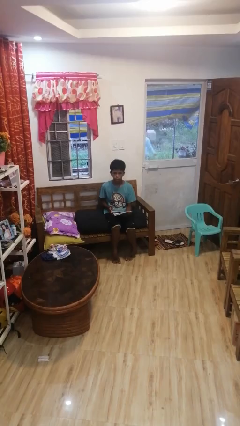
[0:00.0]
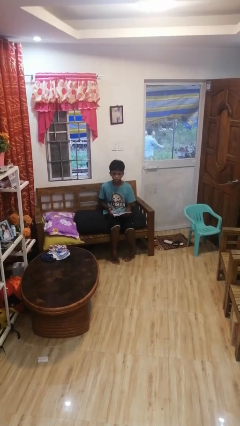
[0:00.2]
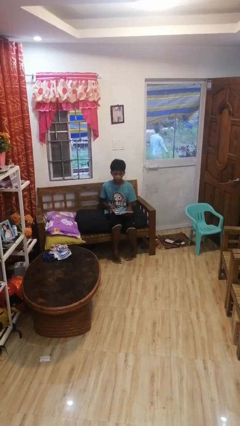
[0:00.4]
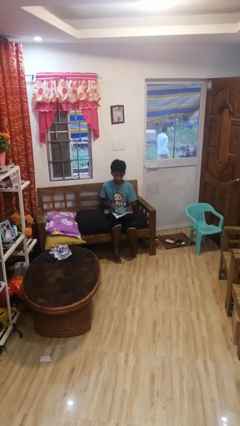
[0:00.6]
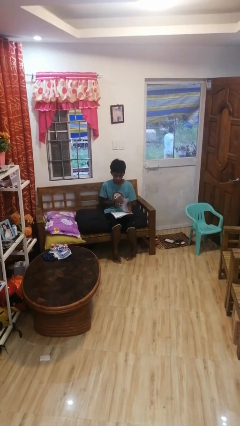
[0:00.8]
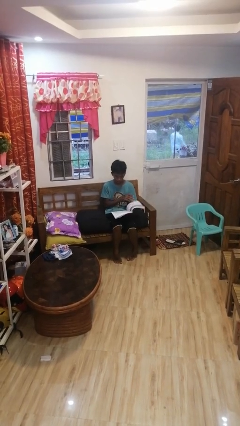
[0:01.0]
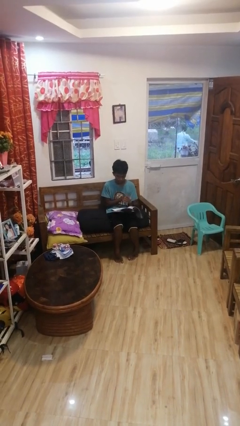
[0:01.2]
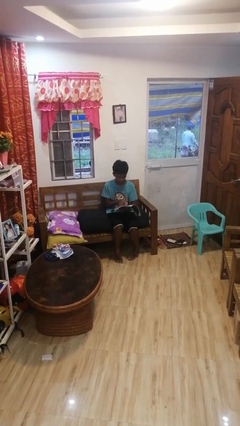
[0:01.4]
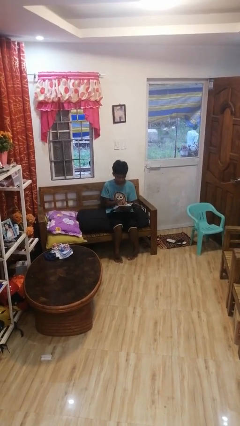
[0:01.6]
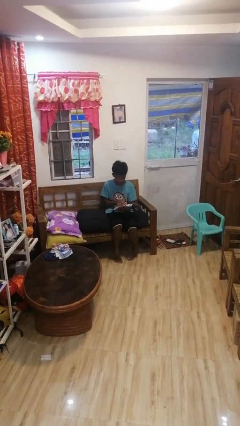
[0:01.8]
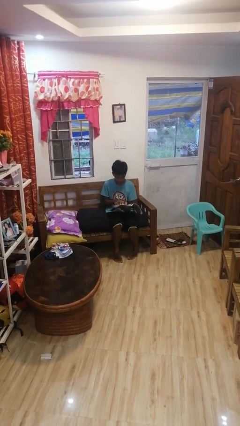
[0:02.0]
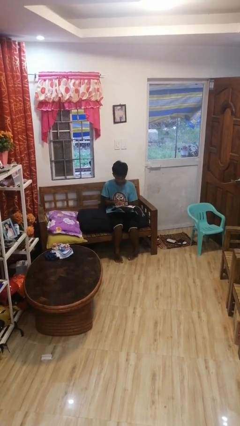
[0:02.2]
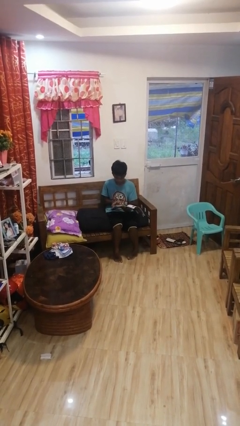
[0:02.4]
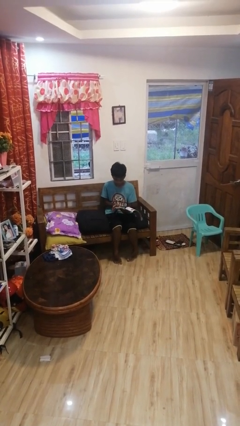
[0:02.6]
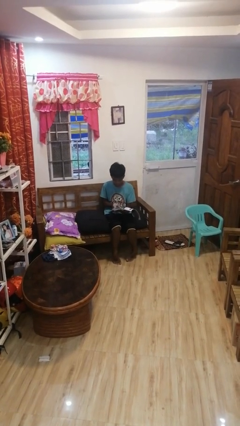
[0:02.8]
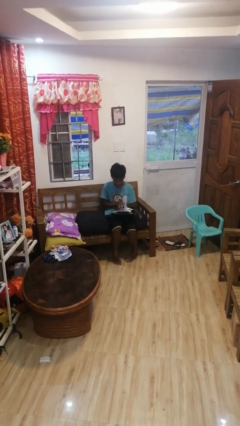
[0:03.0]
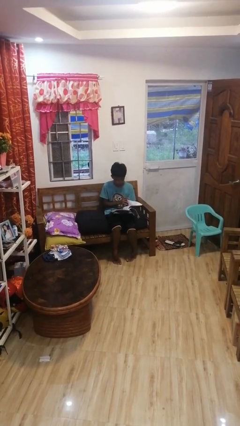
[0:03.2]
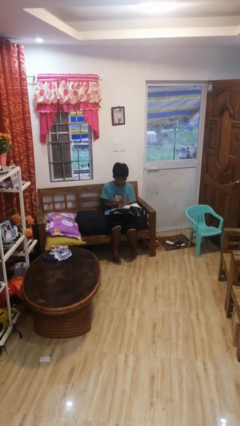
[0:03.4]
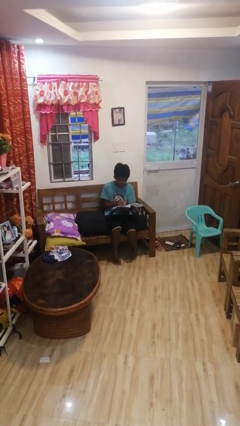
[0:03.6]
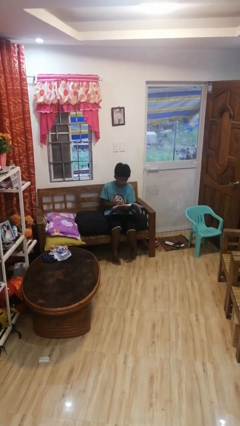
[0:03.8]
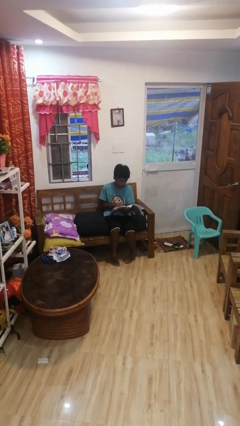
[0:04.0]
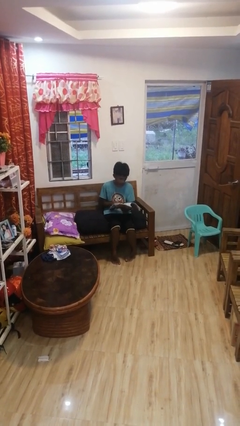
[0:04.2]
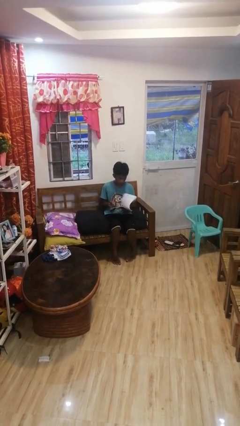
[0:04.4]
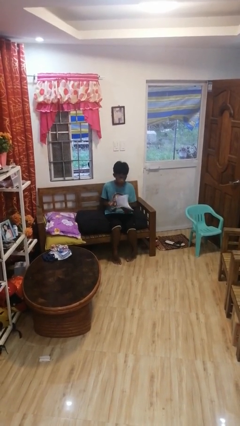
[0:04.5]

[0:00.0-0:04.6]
person reads magazine

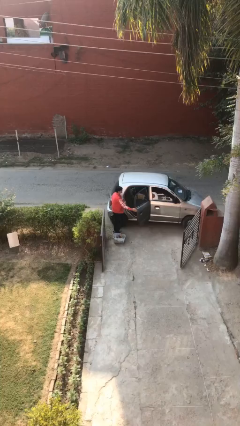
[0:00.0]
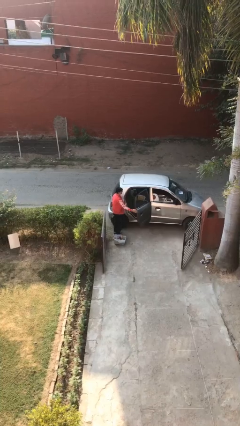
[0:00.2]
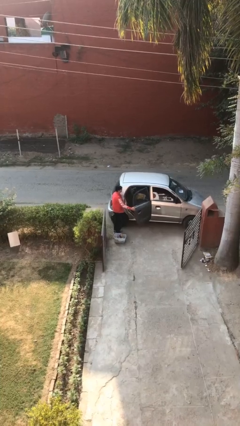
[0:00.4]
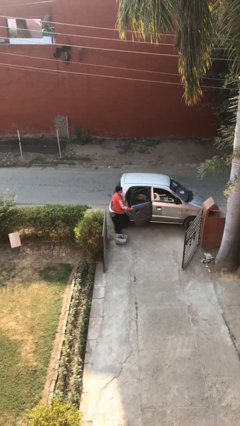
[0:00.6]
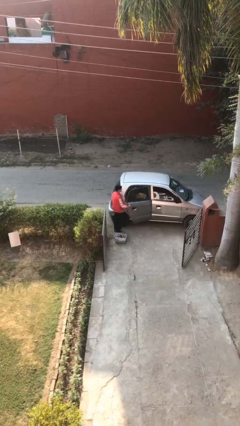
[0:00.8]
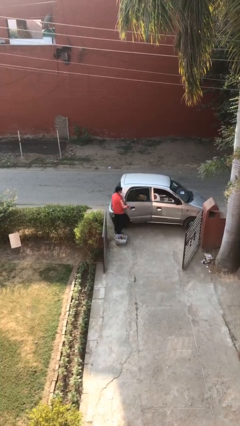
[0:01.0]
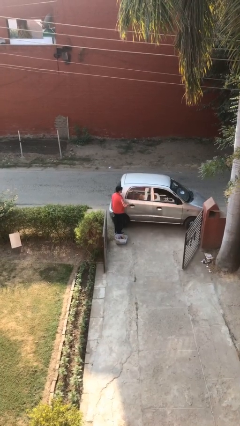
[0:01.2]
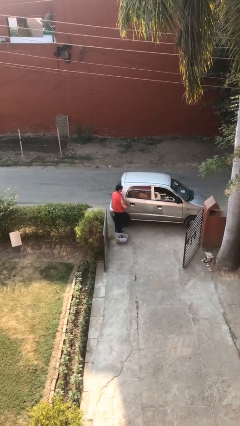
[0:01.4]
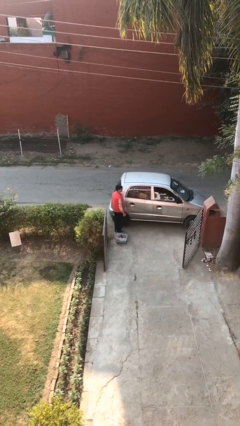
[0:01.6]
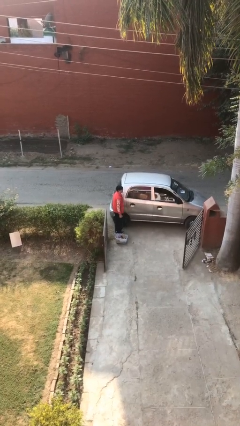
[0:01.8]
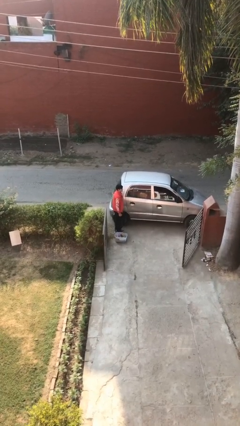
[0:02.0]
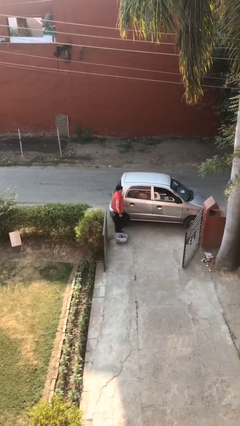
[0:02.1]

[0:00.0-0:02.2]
person closes car door

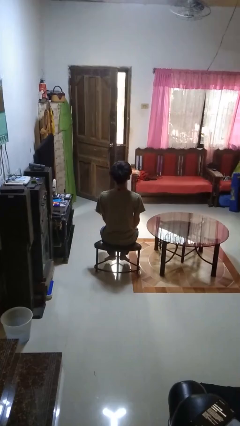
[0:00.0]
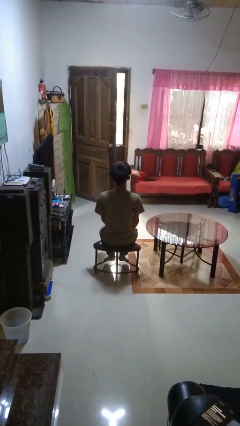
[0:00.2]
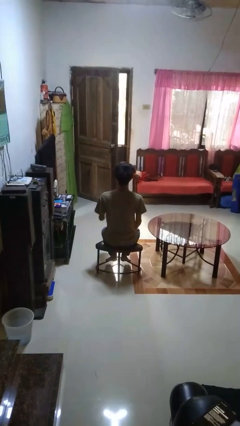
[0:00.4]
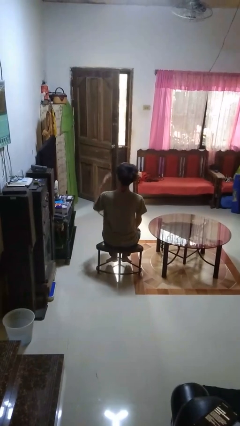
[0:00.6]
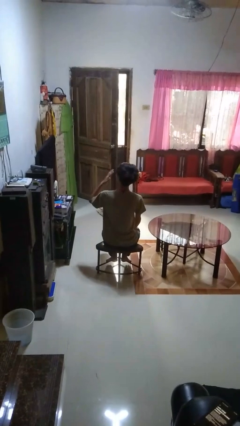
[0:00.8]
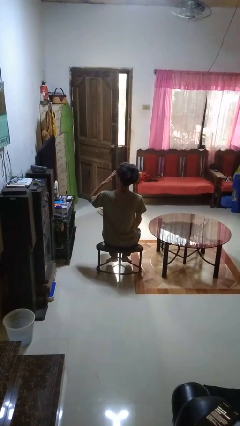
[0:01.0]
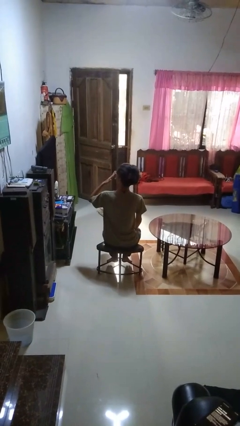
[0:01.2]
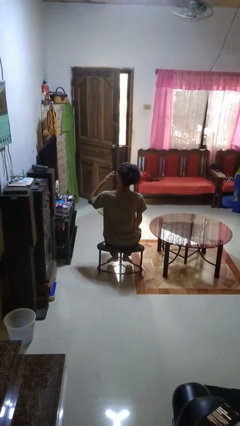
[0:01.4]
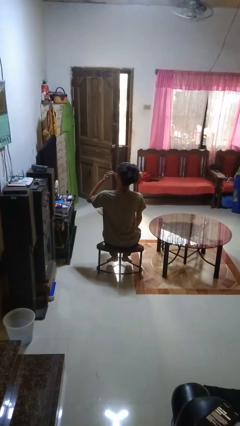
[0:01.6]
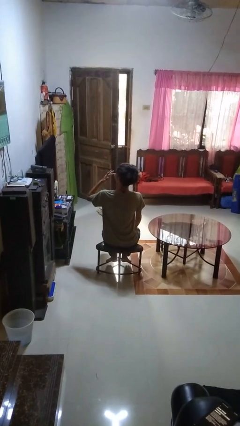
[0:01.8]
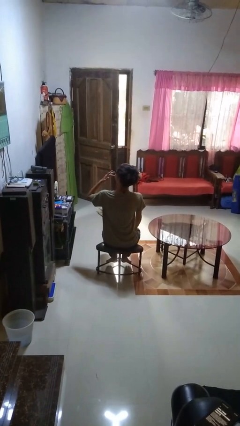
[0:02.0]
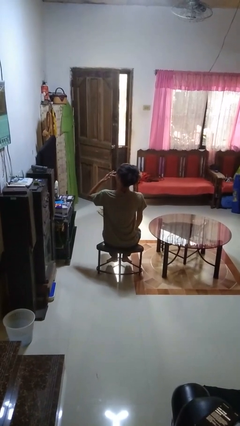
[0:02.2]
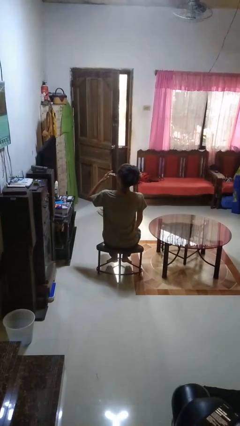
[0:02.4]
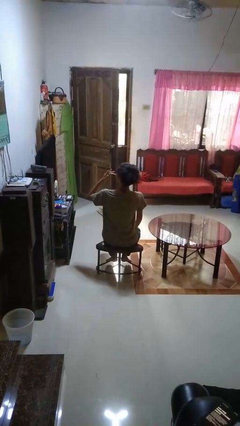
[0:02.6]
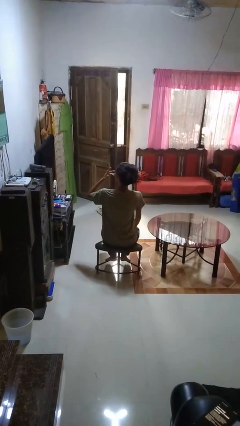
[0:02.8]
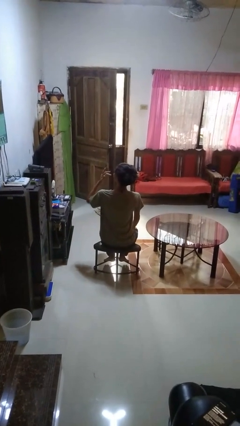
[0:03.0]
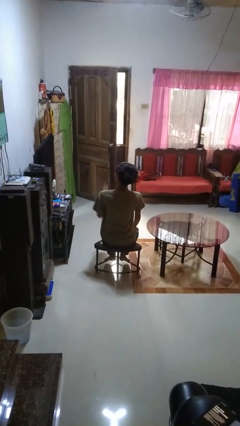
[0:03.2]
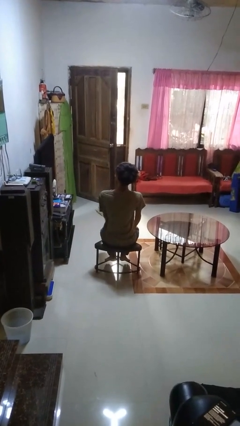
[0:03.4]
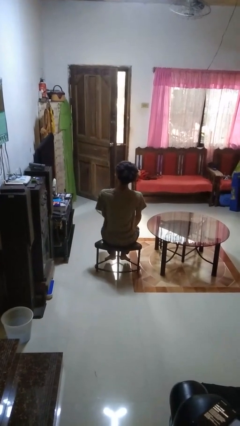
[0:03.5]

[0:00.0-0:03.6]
person licks fingers

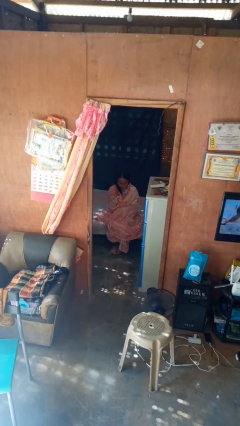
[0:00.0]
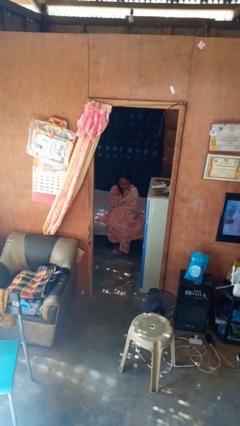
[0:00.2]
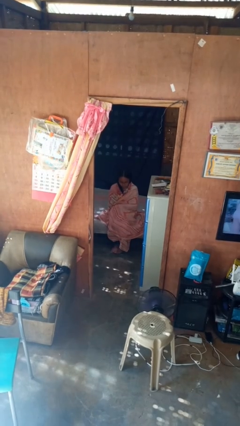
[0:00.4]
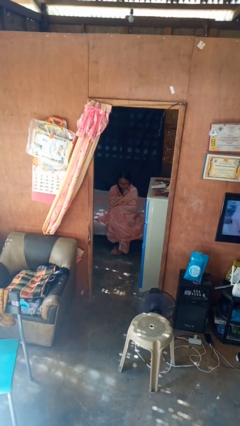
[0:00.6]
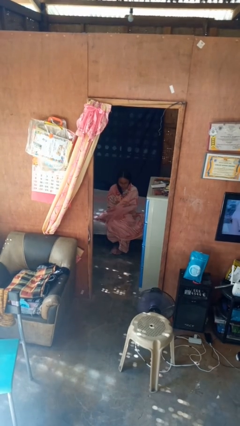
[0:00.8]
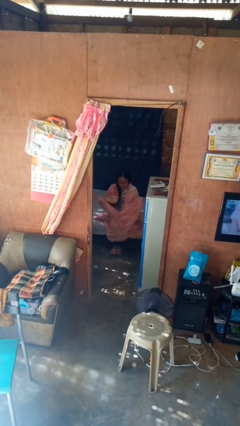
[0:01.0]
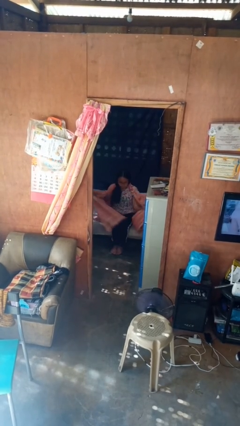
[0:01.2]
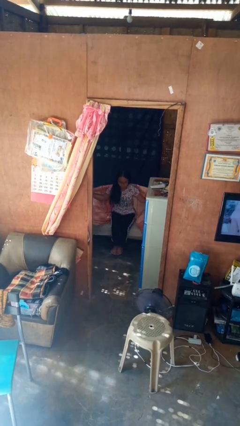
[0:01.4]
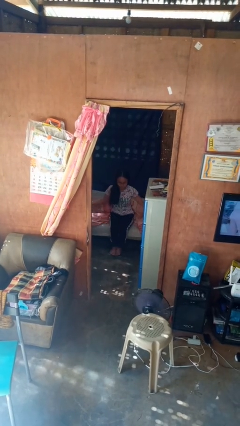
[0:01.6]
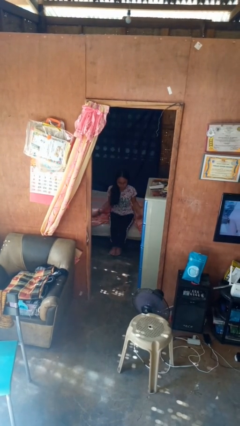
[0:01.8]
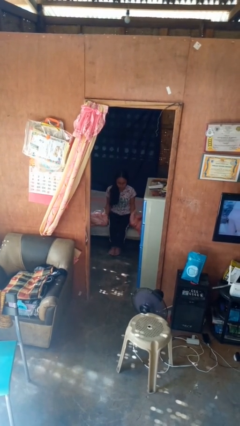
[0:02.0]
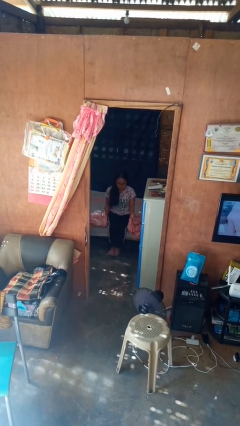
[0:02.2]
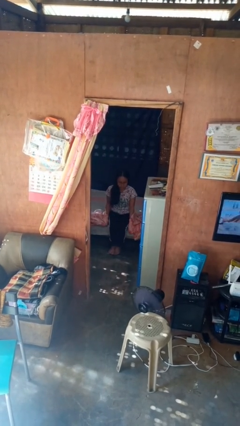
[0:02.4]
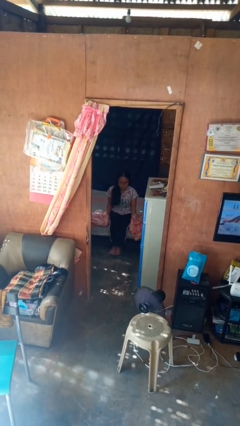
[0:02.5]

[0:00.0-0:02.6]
person uncovers with blanket

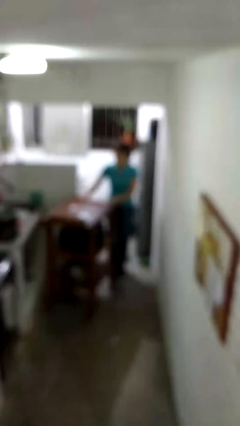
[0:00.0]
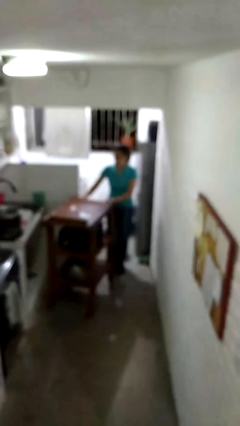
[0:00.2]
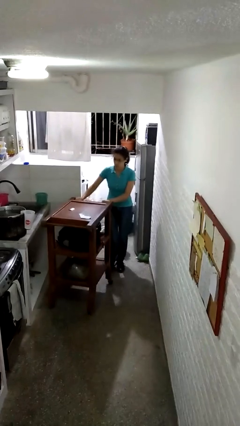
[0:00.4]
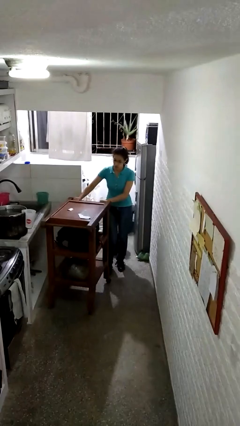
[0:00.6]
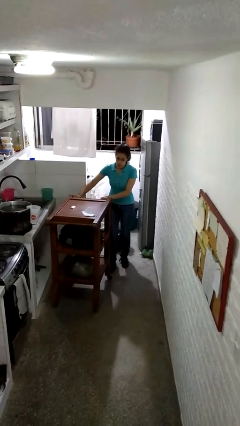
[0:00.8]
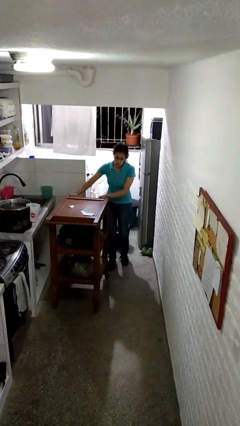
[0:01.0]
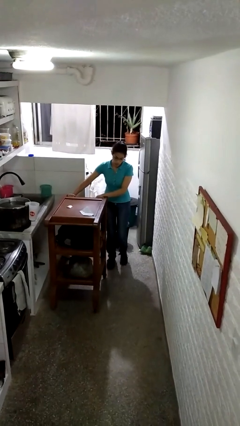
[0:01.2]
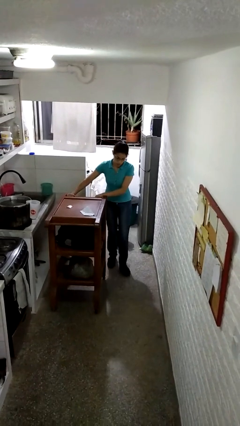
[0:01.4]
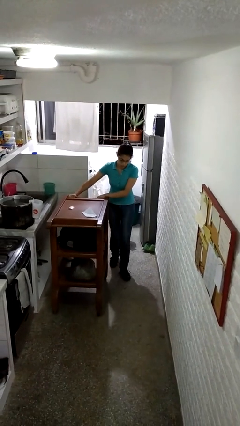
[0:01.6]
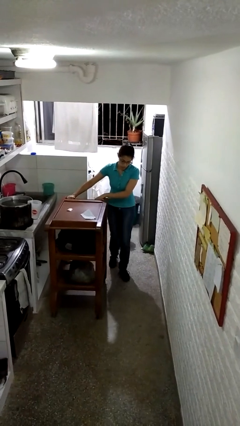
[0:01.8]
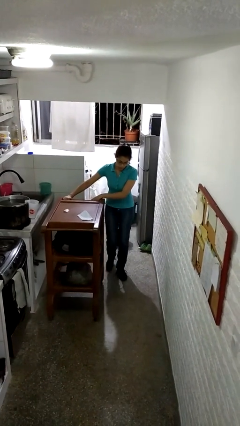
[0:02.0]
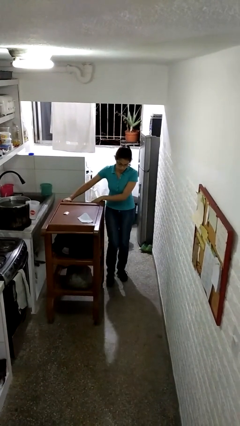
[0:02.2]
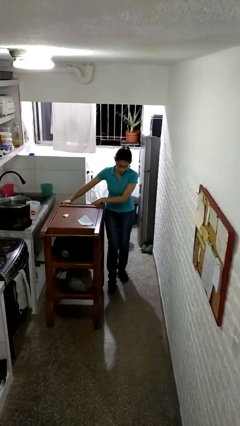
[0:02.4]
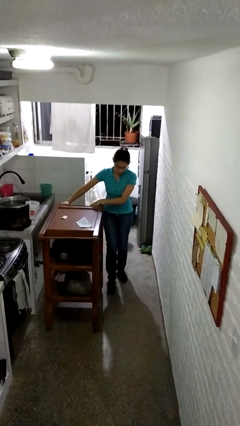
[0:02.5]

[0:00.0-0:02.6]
person pushes wheeled cart

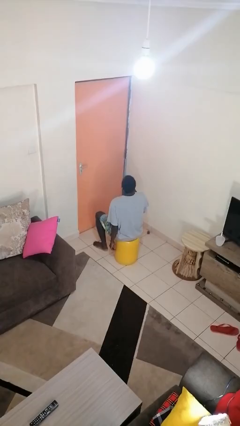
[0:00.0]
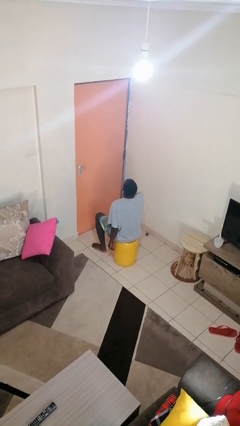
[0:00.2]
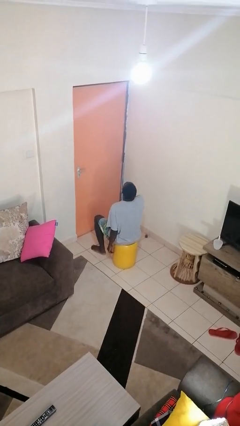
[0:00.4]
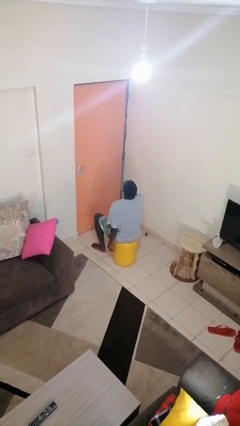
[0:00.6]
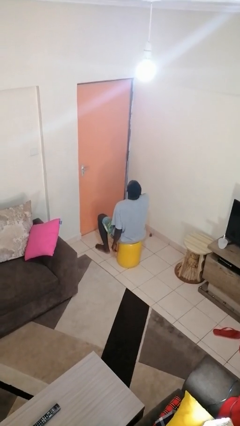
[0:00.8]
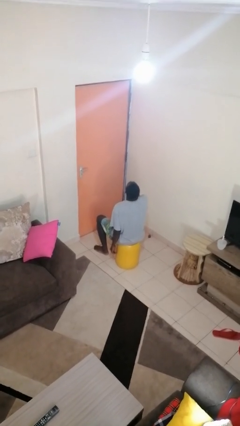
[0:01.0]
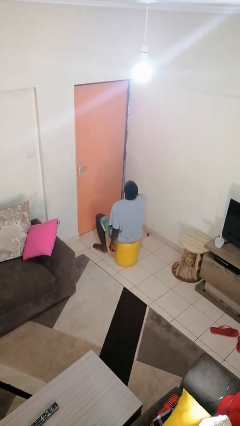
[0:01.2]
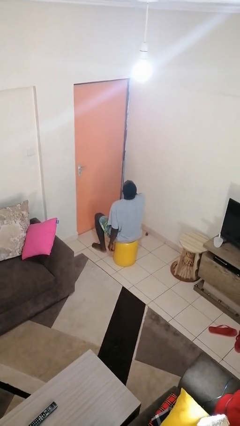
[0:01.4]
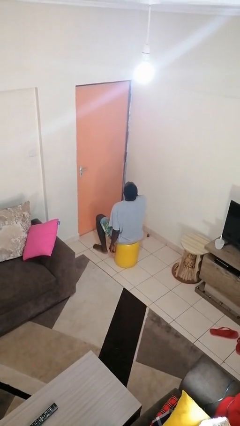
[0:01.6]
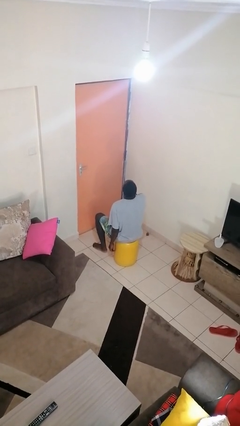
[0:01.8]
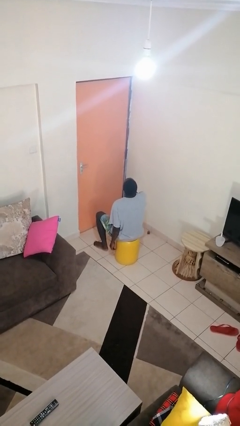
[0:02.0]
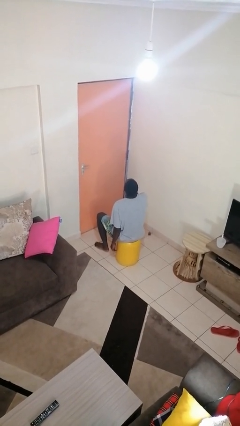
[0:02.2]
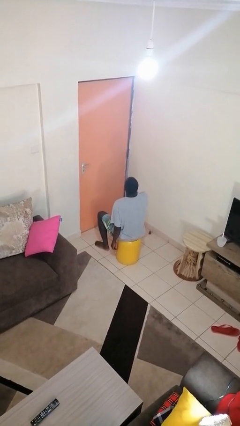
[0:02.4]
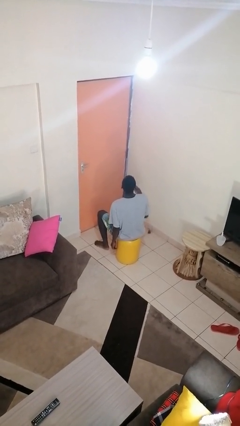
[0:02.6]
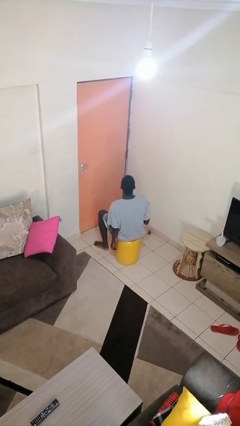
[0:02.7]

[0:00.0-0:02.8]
person strokes chin
